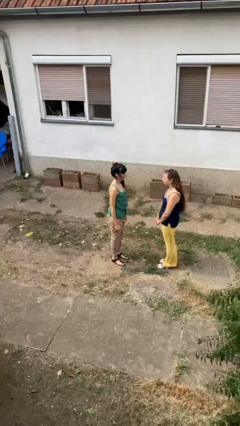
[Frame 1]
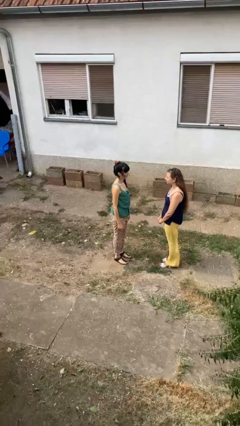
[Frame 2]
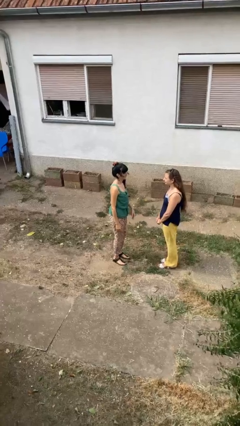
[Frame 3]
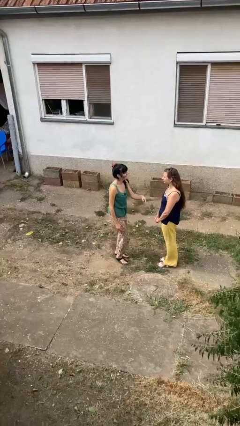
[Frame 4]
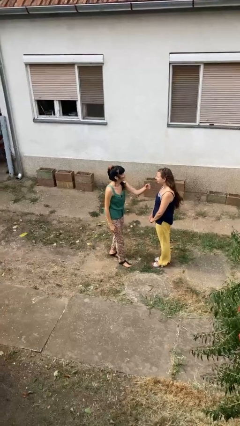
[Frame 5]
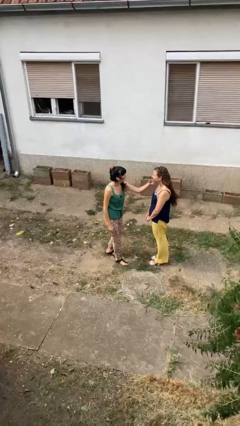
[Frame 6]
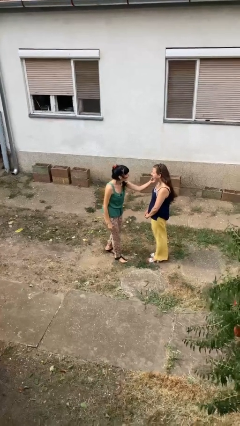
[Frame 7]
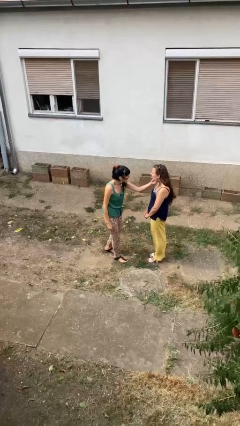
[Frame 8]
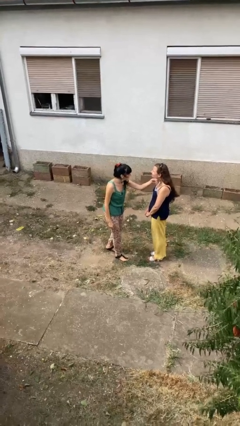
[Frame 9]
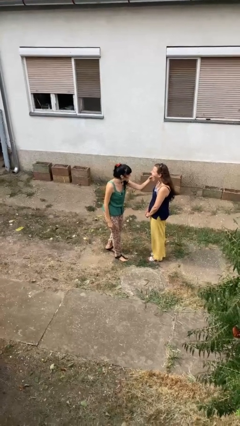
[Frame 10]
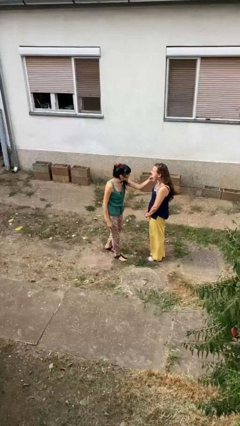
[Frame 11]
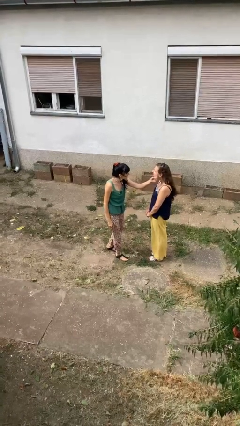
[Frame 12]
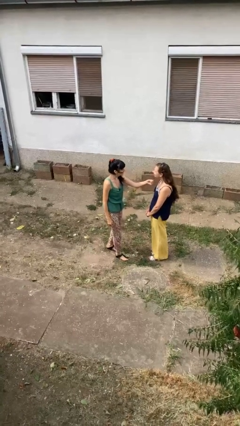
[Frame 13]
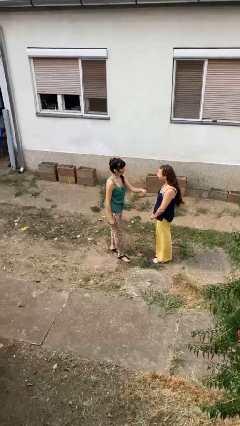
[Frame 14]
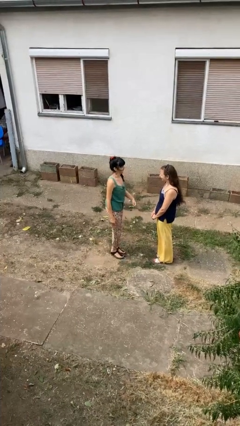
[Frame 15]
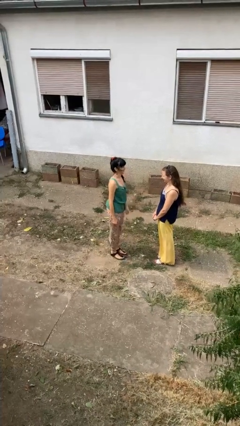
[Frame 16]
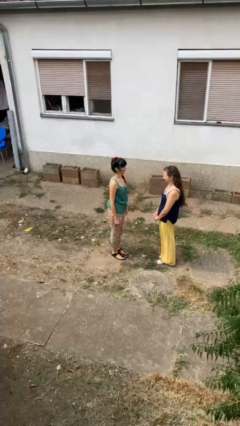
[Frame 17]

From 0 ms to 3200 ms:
person touches face of person

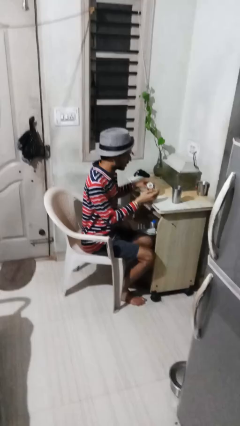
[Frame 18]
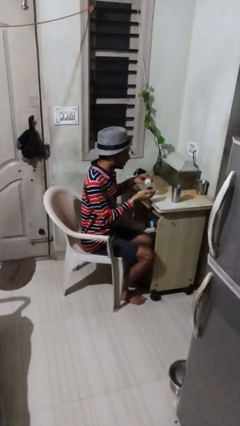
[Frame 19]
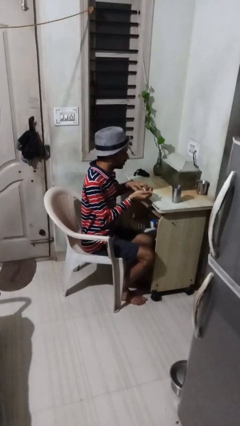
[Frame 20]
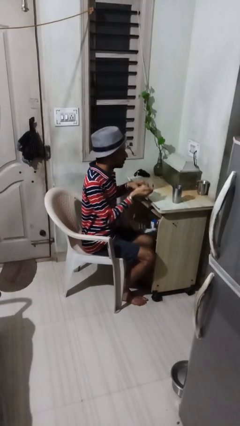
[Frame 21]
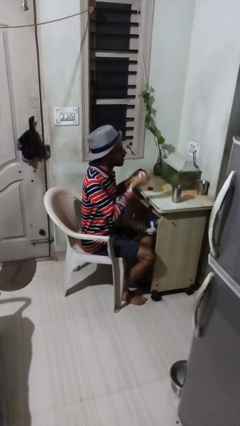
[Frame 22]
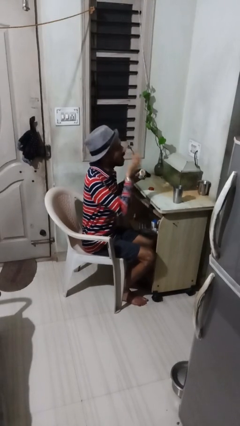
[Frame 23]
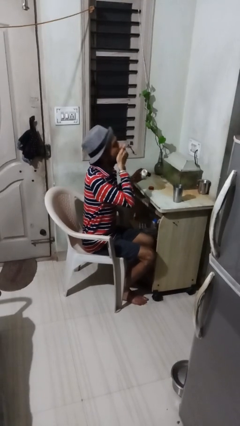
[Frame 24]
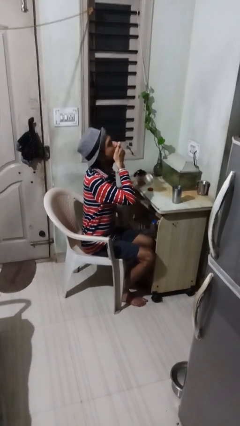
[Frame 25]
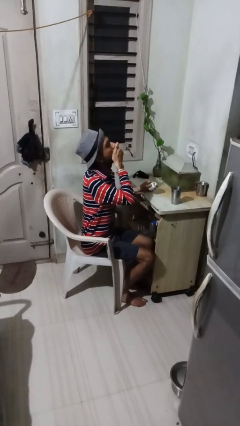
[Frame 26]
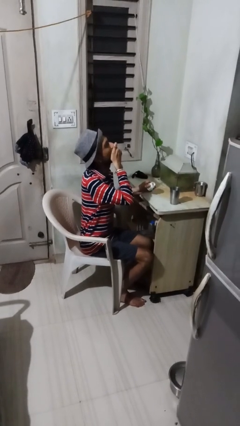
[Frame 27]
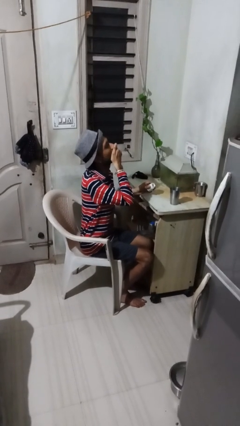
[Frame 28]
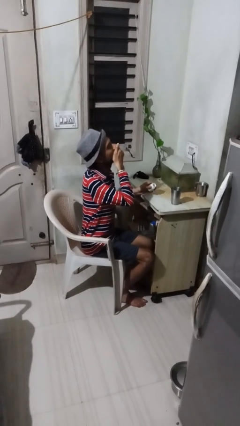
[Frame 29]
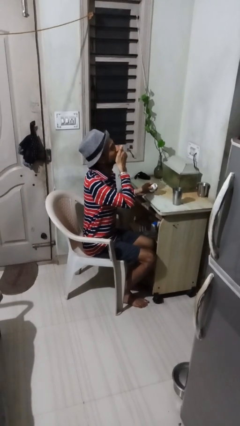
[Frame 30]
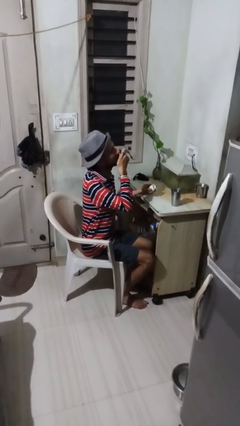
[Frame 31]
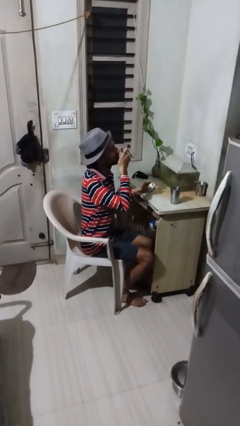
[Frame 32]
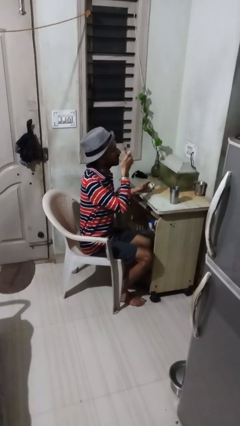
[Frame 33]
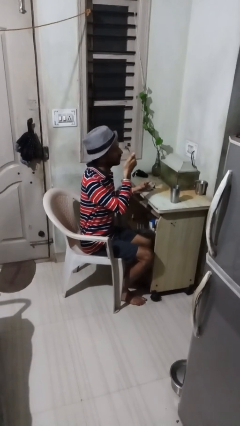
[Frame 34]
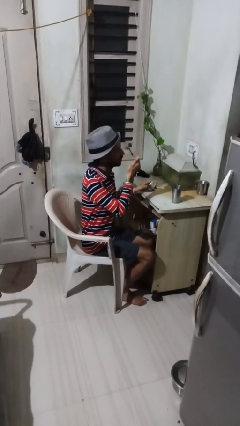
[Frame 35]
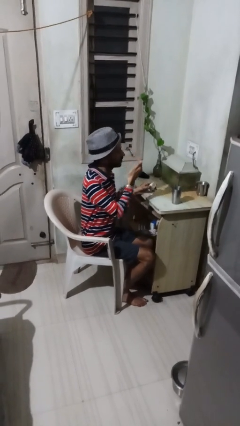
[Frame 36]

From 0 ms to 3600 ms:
person takes medicine pills

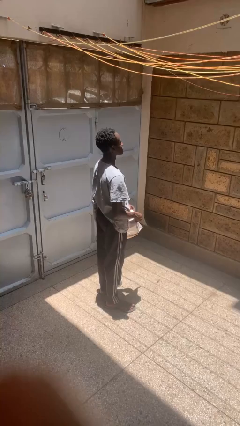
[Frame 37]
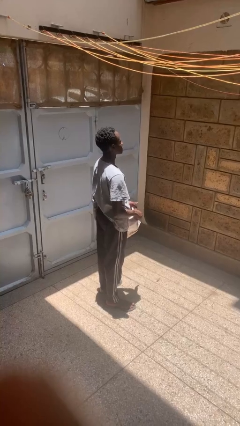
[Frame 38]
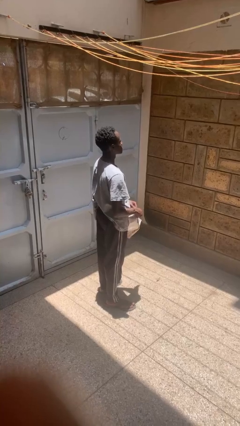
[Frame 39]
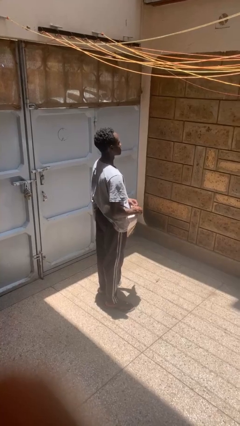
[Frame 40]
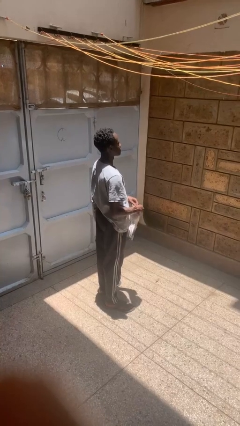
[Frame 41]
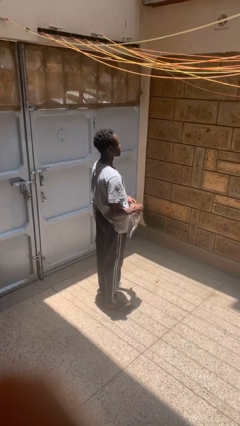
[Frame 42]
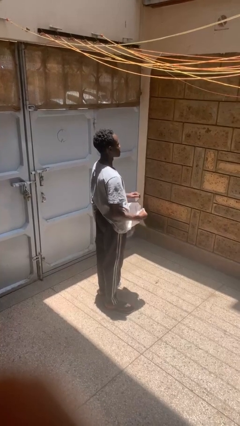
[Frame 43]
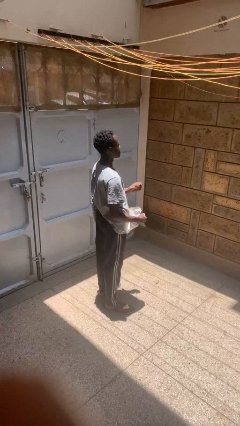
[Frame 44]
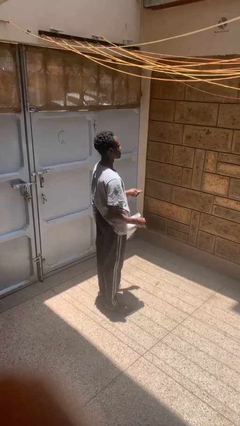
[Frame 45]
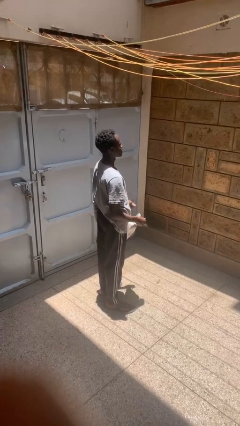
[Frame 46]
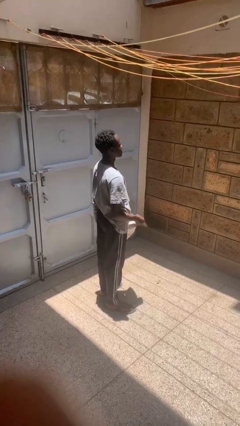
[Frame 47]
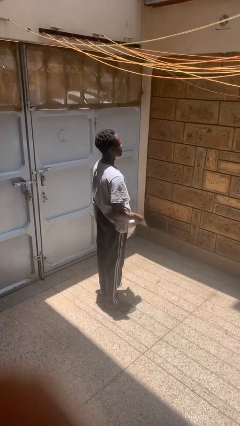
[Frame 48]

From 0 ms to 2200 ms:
person tears paper

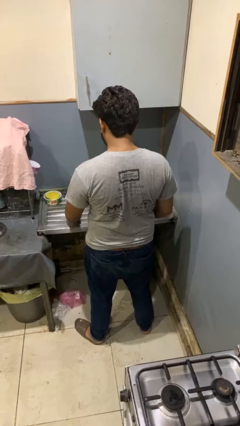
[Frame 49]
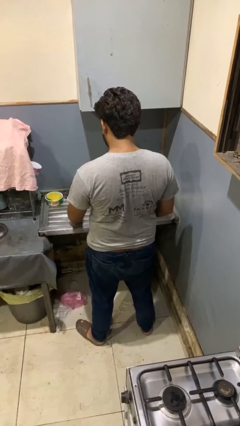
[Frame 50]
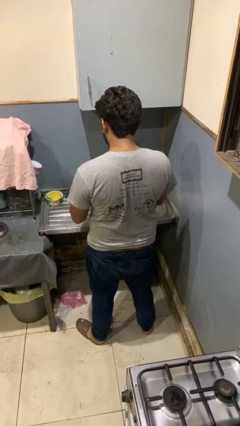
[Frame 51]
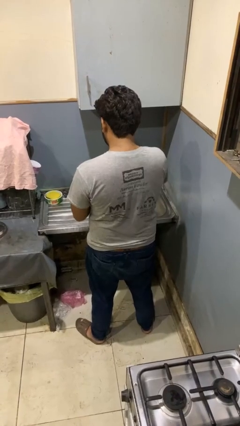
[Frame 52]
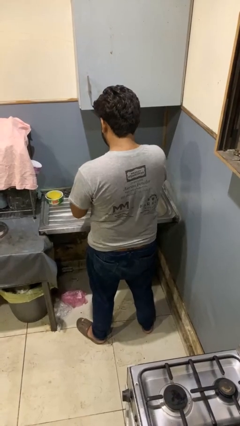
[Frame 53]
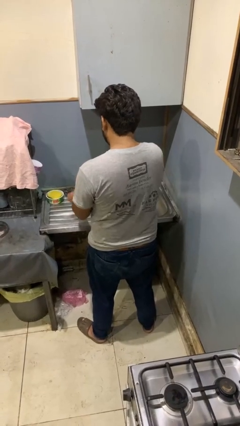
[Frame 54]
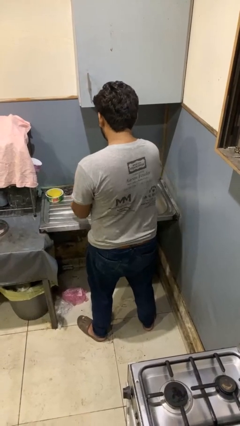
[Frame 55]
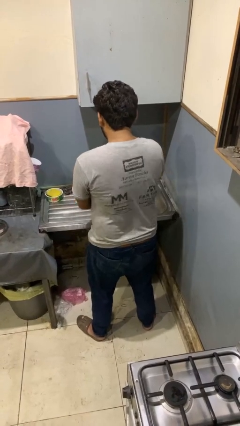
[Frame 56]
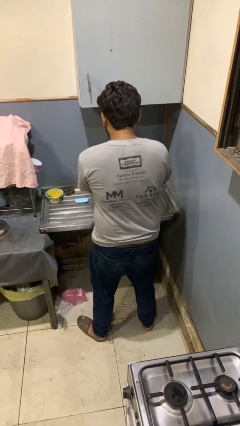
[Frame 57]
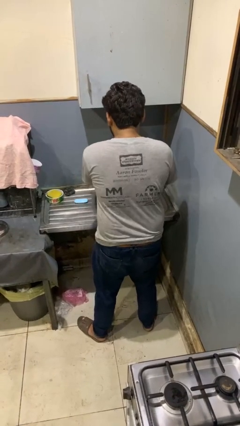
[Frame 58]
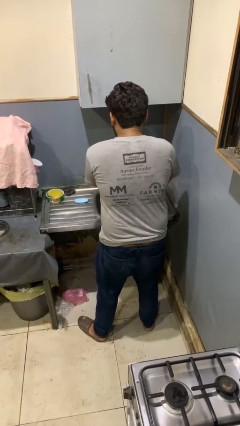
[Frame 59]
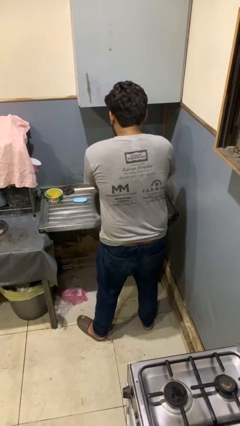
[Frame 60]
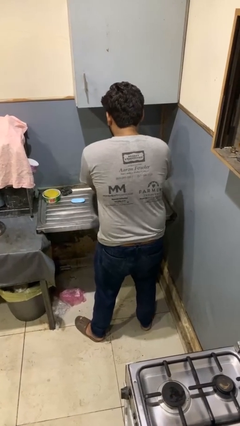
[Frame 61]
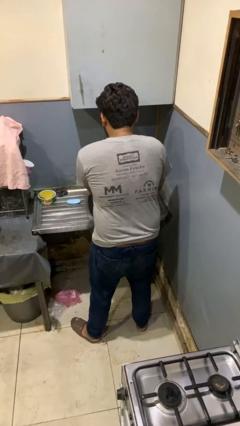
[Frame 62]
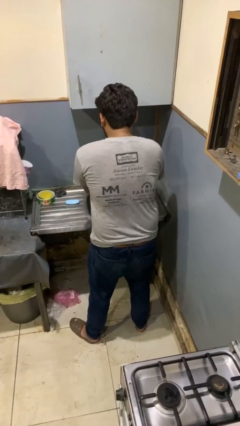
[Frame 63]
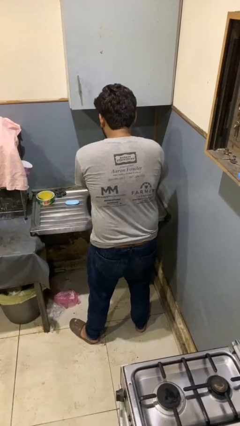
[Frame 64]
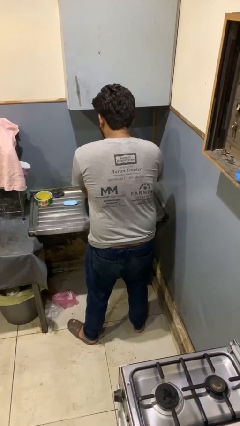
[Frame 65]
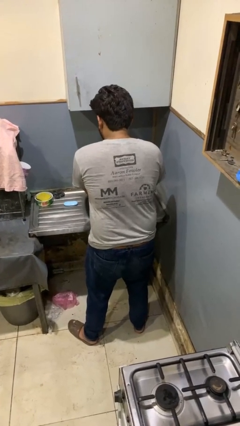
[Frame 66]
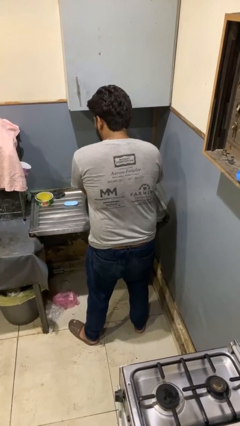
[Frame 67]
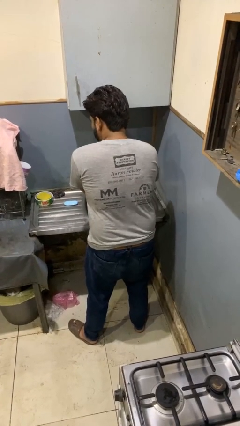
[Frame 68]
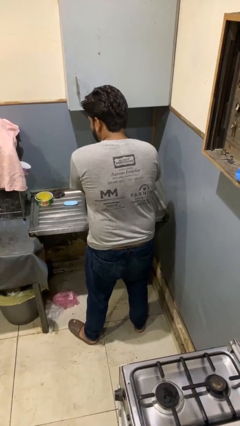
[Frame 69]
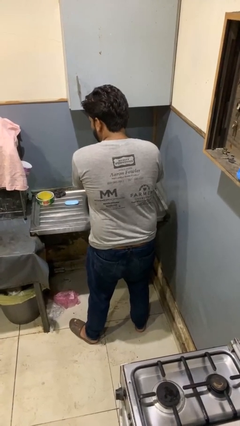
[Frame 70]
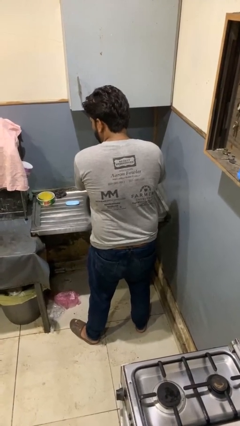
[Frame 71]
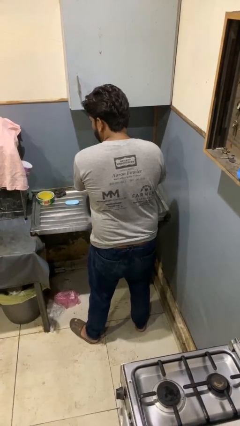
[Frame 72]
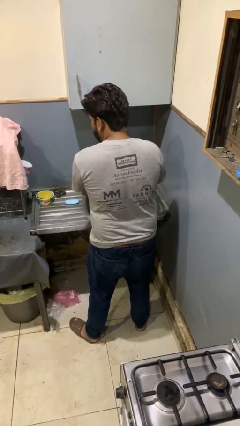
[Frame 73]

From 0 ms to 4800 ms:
person washes hands

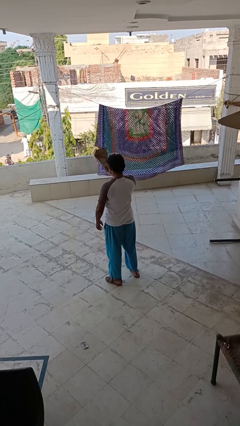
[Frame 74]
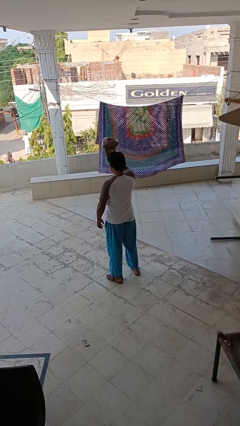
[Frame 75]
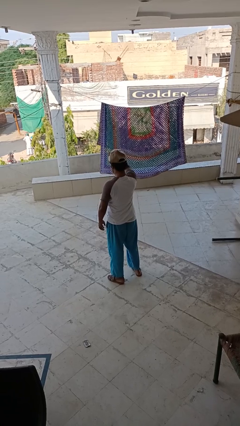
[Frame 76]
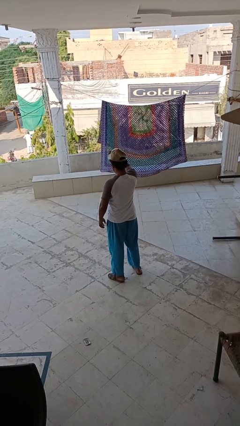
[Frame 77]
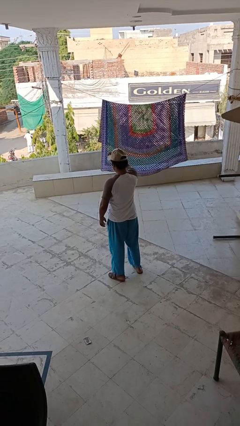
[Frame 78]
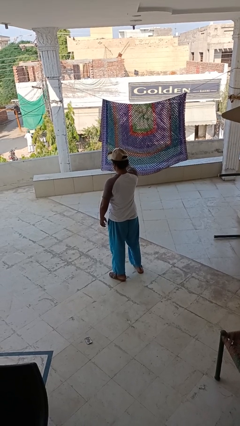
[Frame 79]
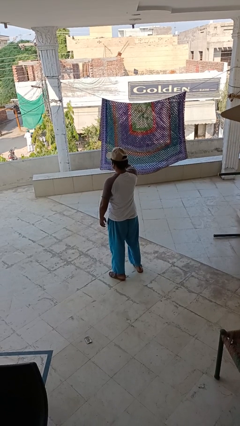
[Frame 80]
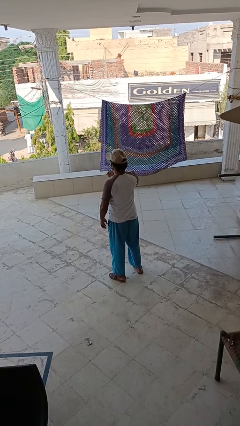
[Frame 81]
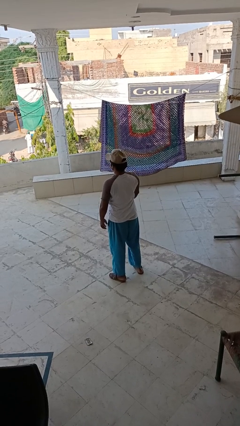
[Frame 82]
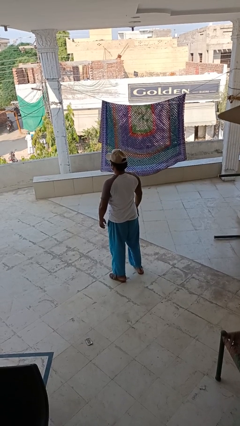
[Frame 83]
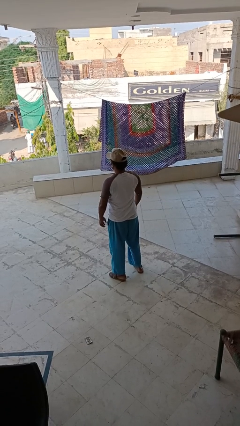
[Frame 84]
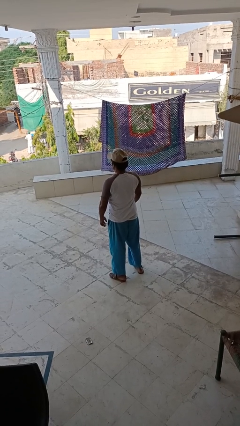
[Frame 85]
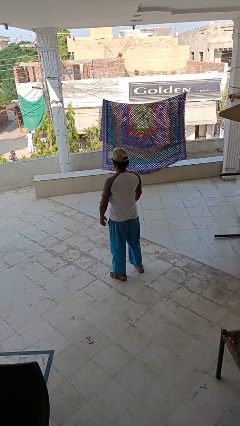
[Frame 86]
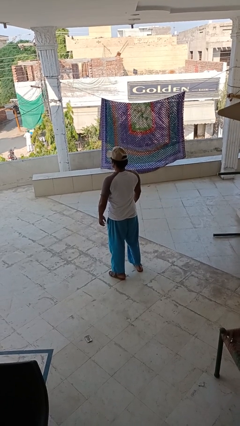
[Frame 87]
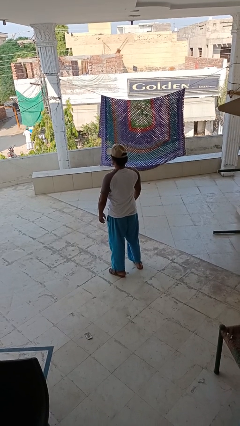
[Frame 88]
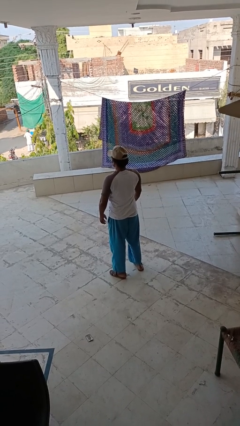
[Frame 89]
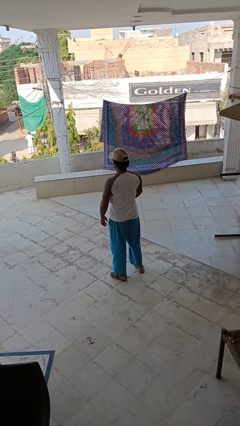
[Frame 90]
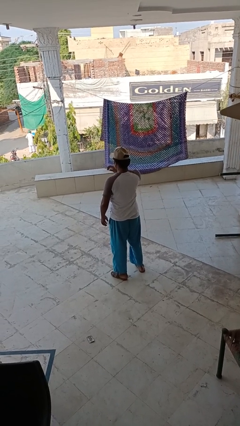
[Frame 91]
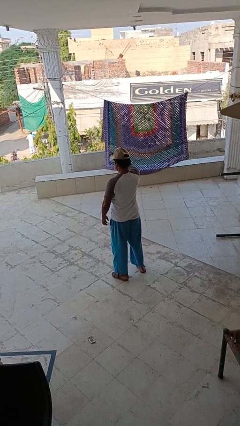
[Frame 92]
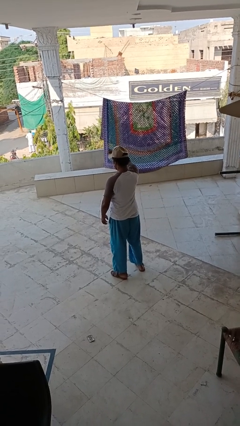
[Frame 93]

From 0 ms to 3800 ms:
person puts on hat

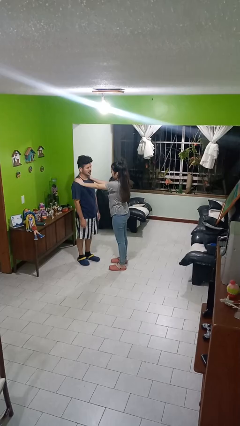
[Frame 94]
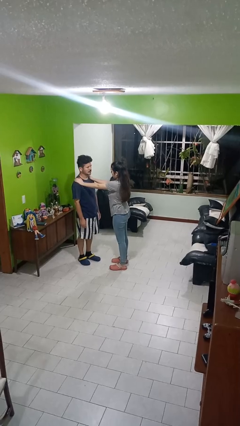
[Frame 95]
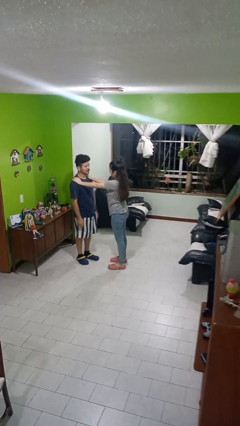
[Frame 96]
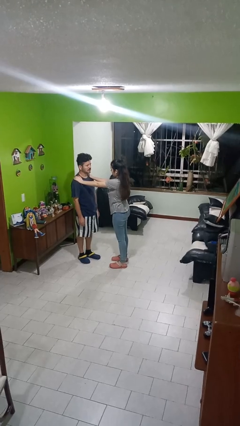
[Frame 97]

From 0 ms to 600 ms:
person grabs person by shoulder
